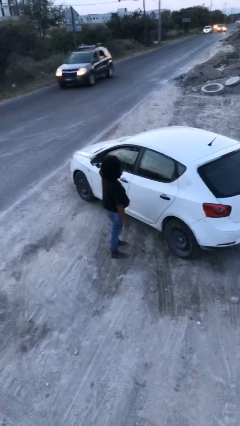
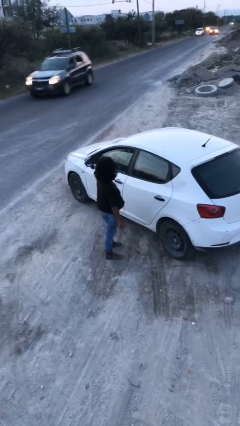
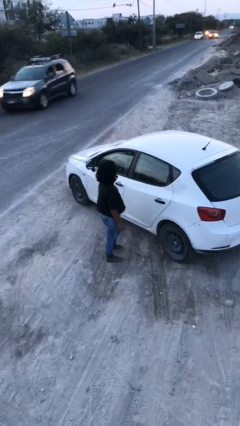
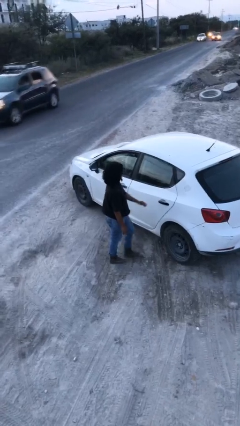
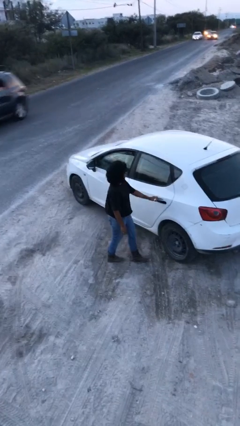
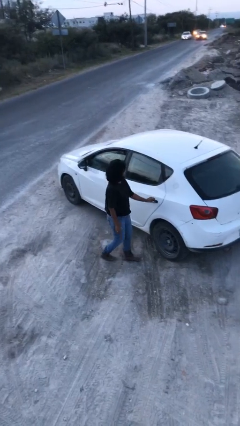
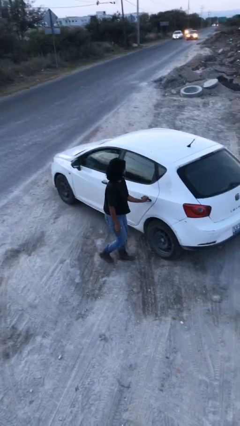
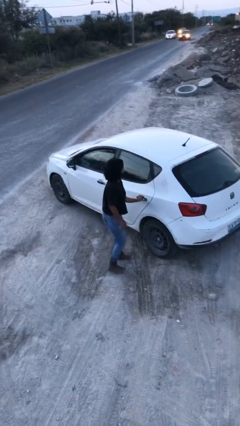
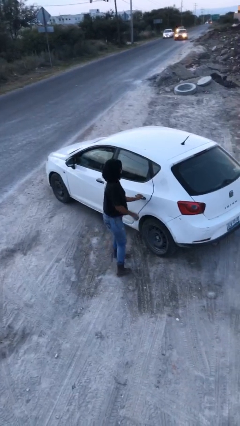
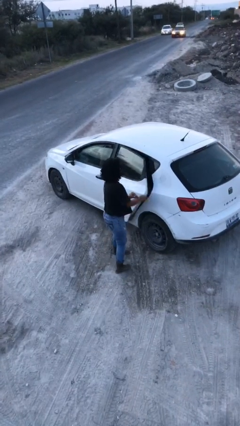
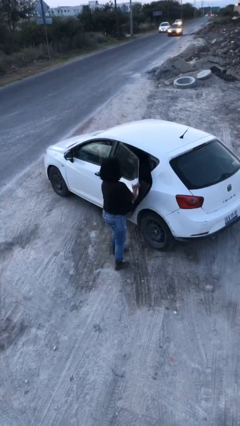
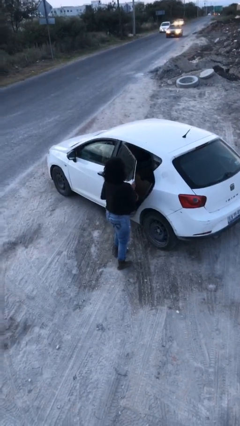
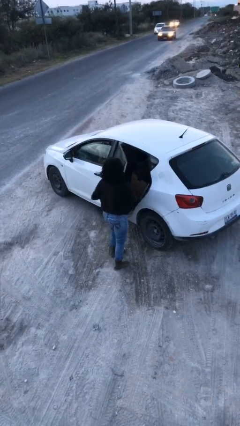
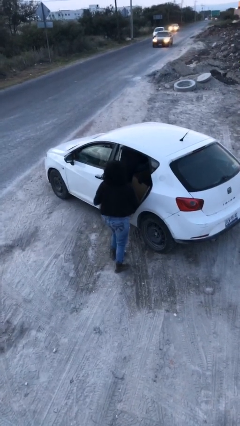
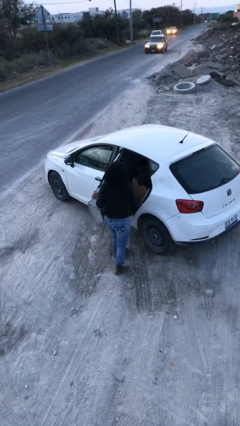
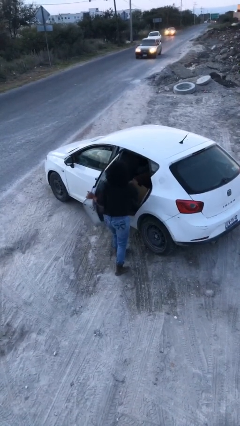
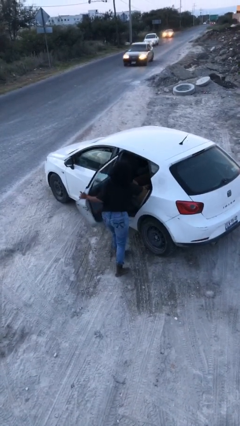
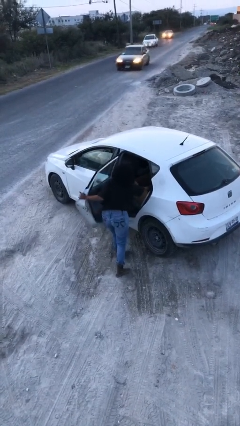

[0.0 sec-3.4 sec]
person opens car door

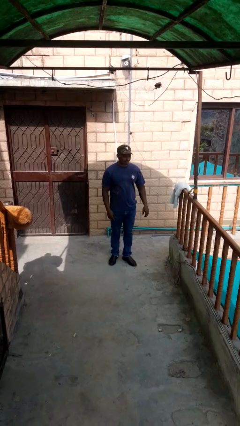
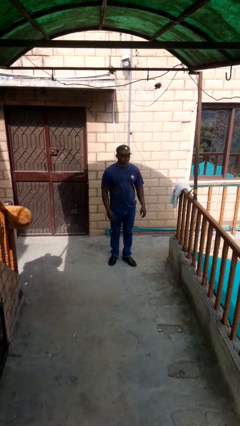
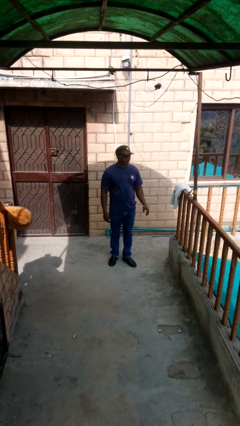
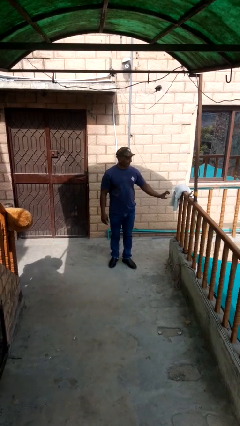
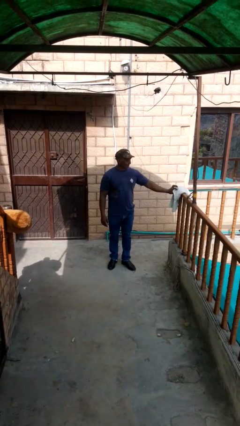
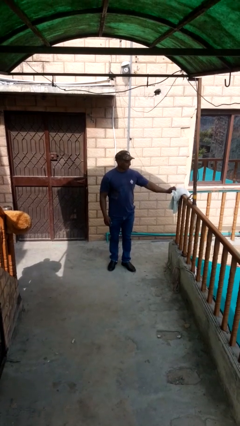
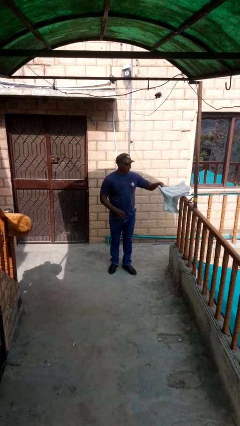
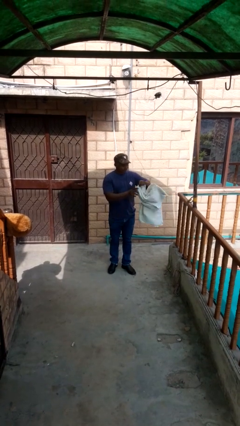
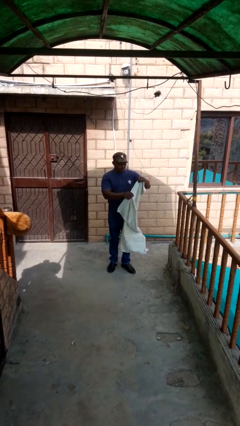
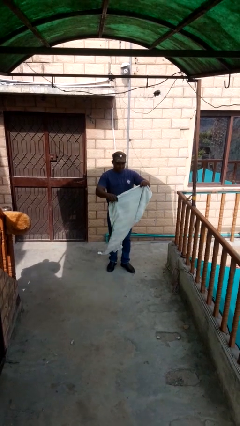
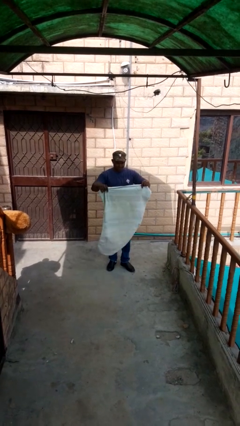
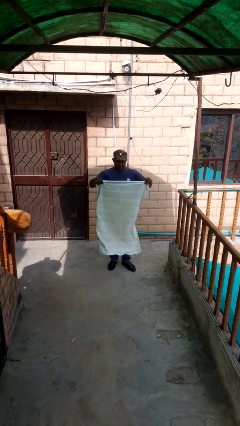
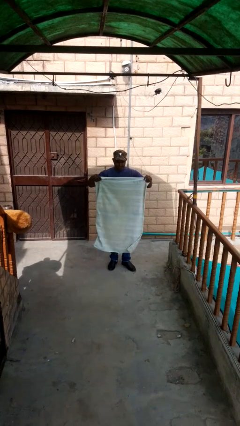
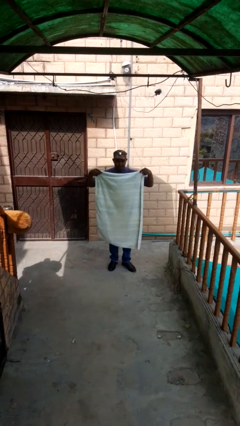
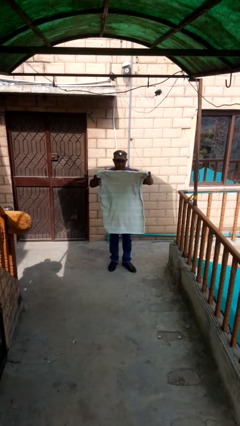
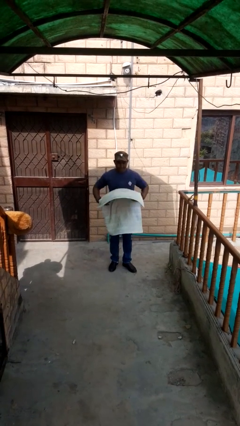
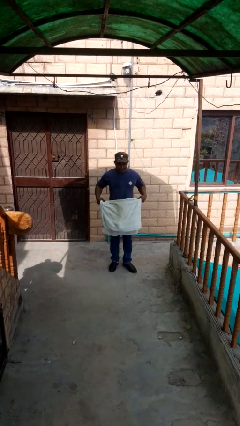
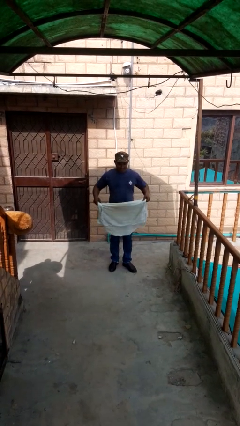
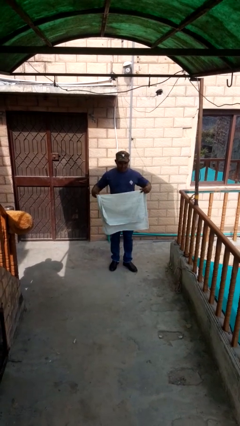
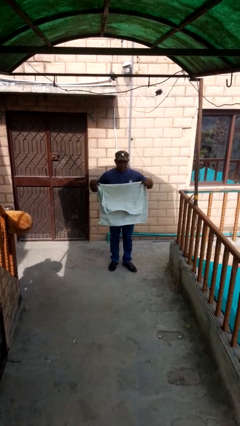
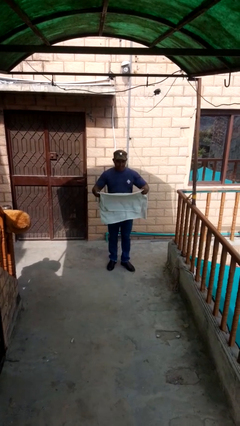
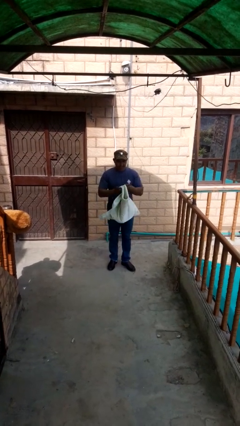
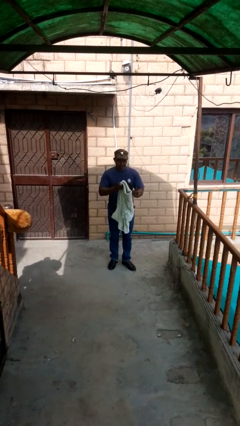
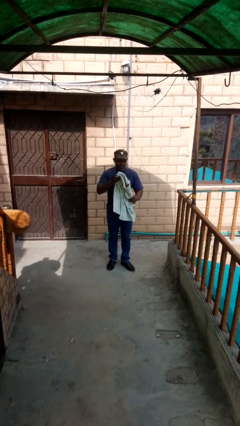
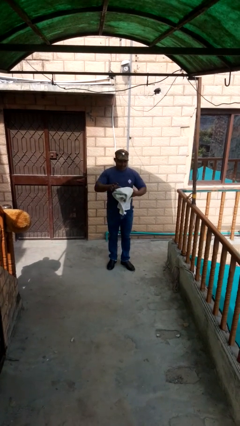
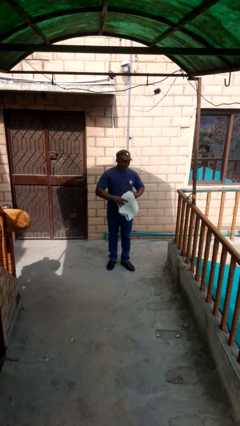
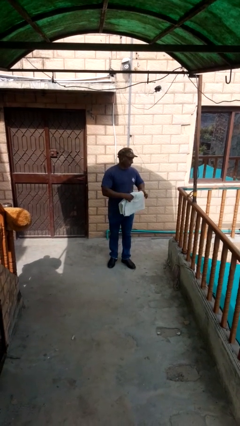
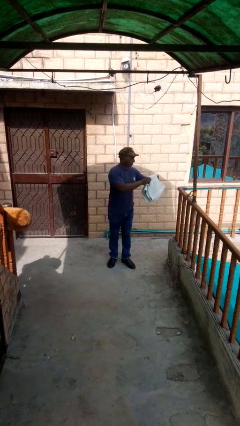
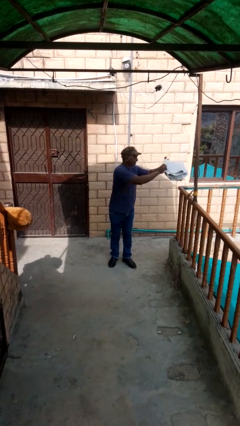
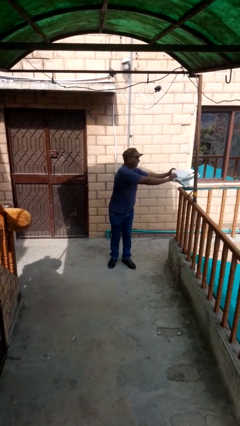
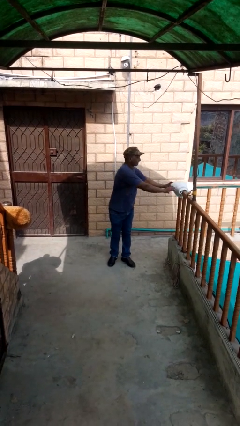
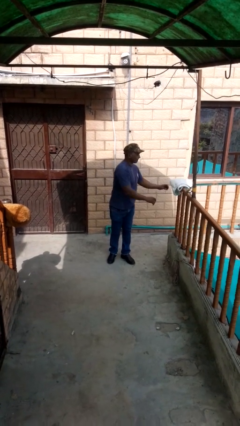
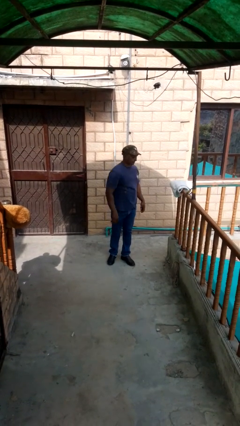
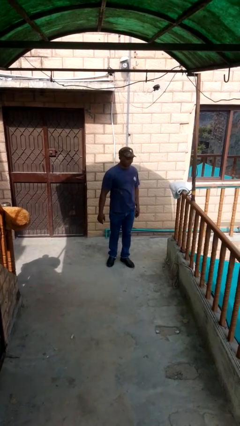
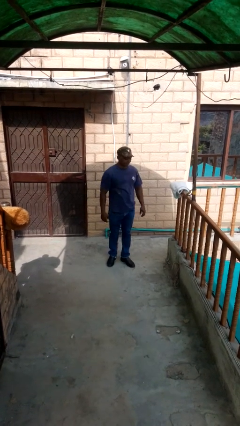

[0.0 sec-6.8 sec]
person folds towel

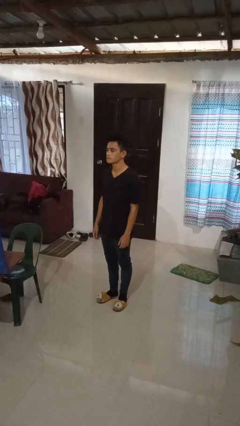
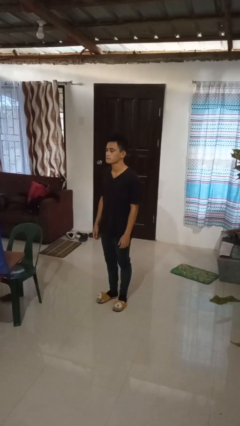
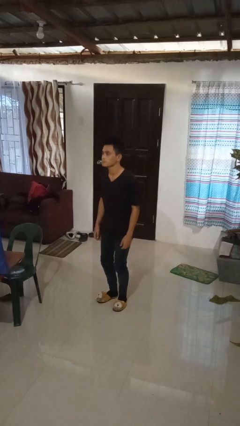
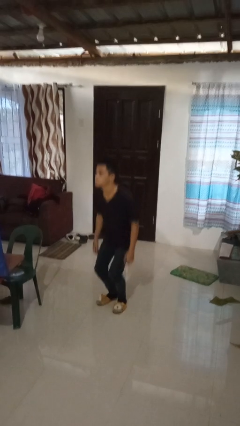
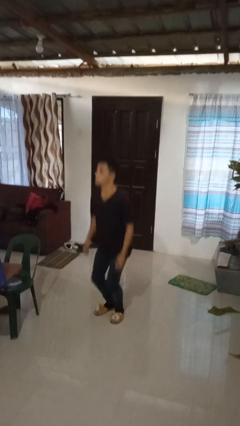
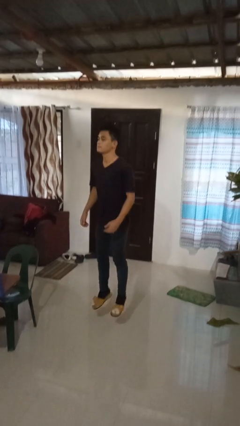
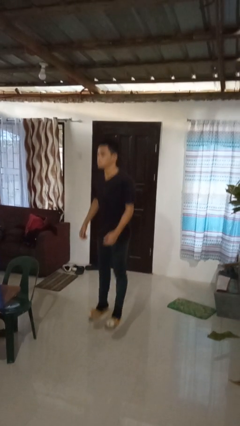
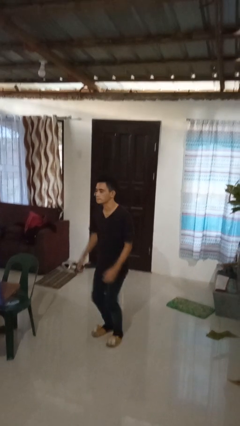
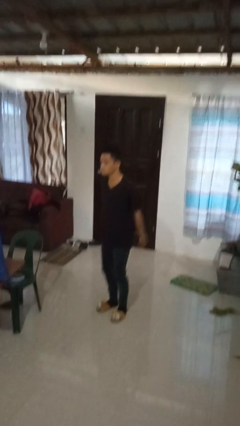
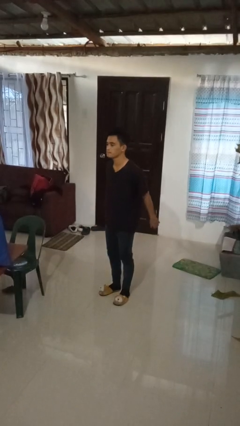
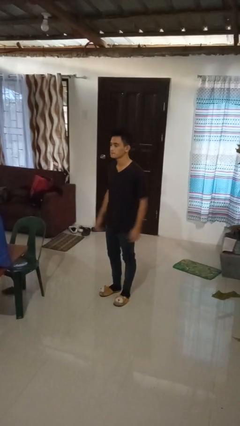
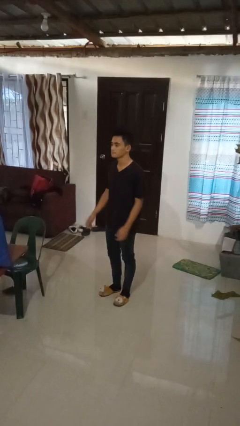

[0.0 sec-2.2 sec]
person jumps

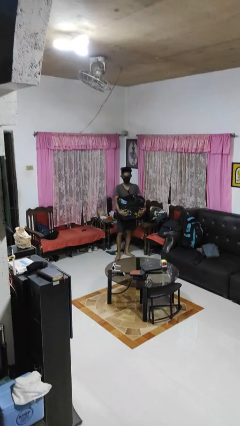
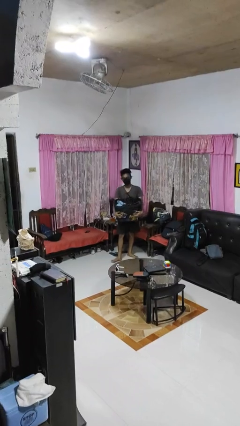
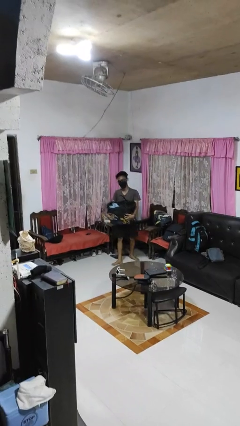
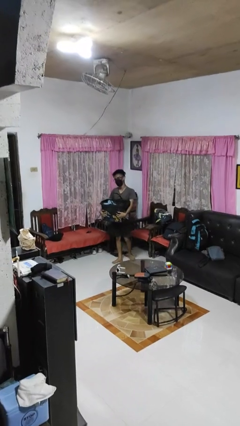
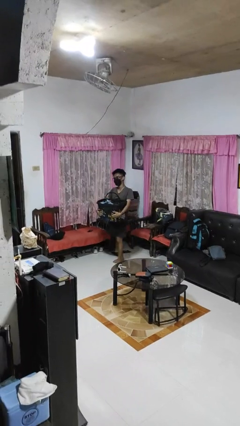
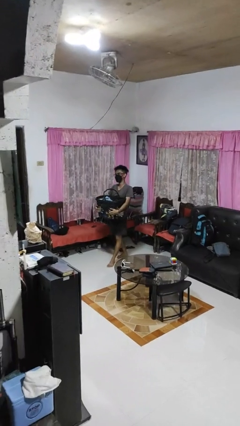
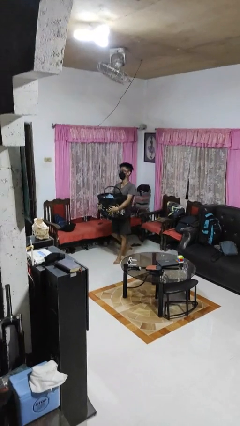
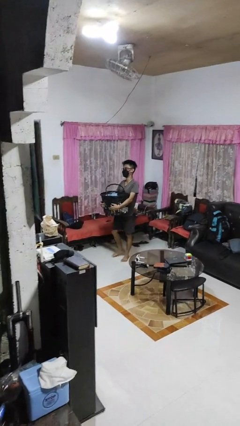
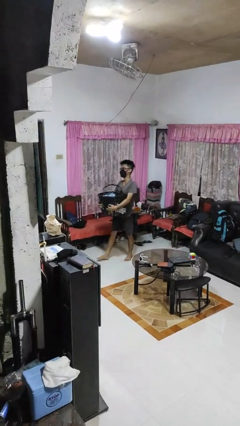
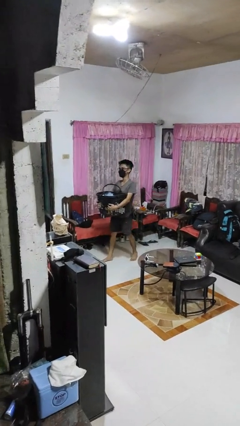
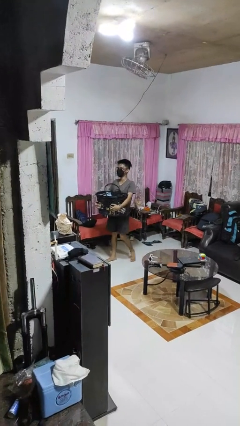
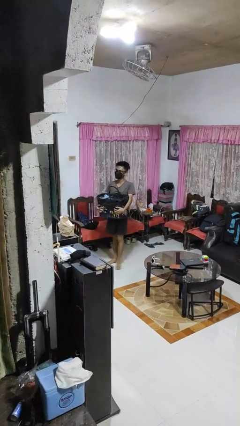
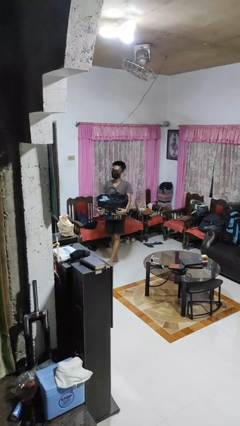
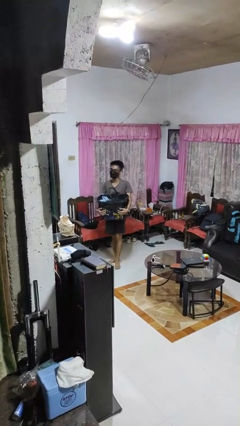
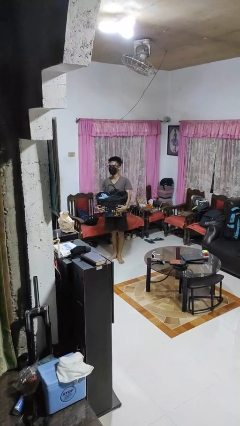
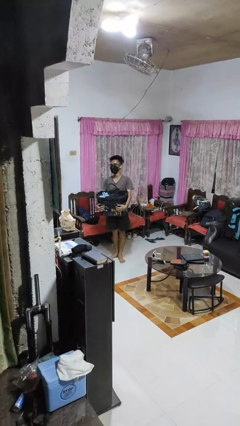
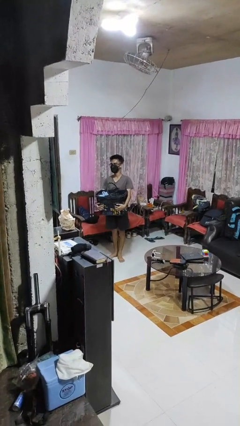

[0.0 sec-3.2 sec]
person carries laundry basket

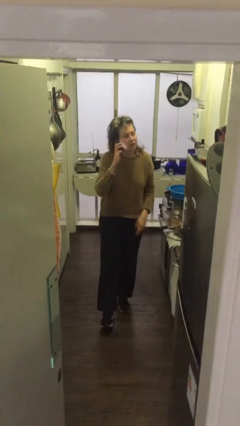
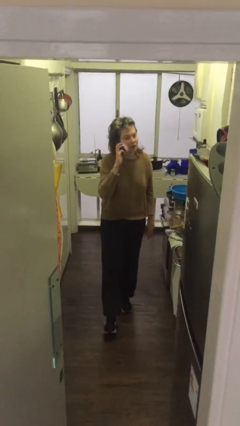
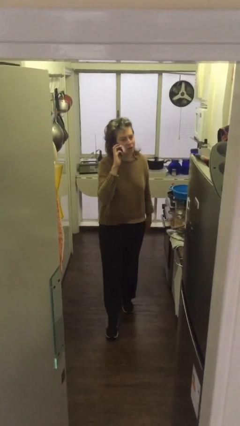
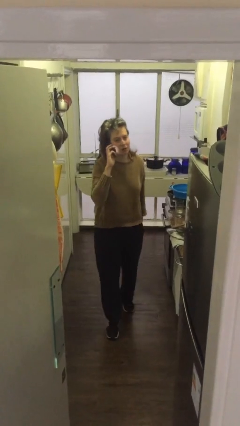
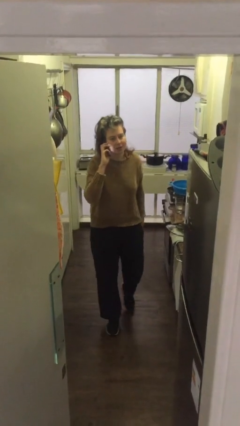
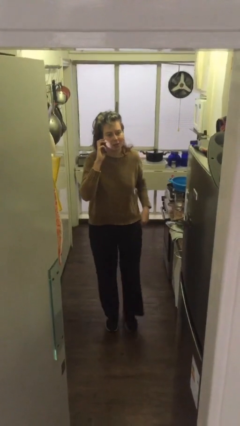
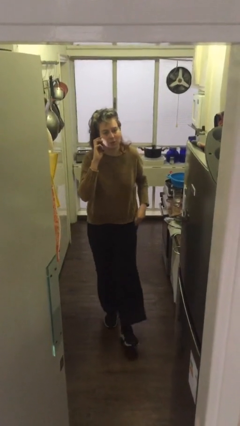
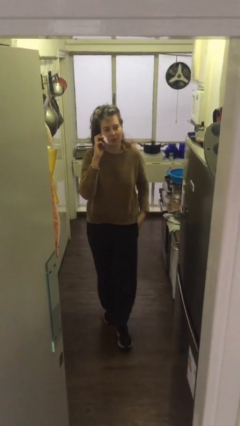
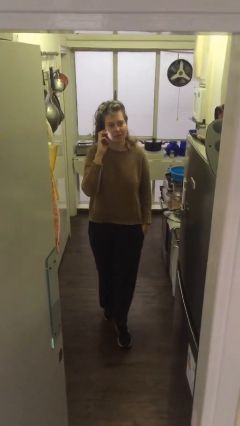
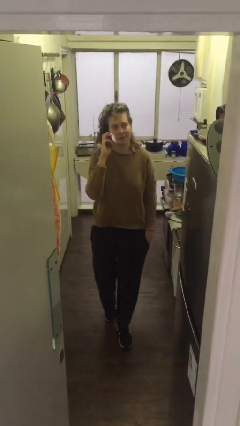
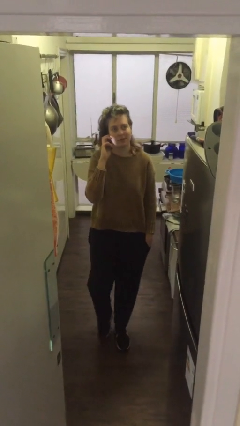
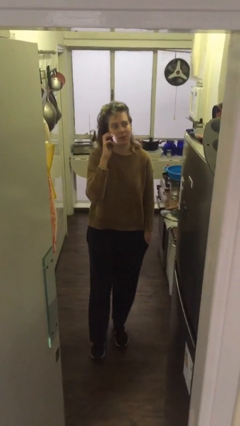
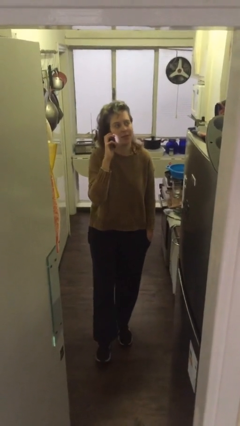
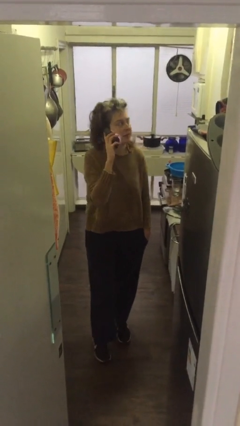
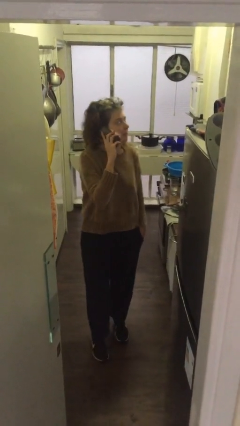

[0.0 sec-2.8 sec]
person talks on phone
